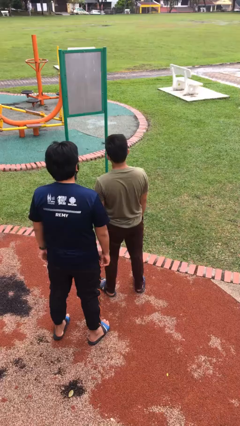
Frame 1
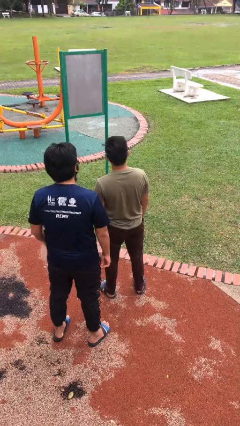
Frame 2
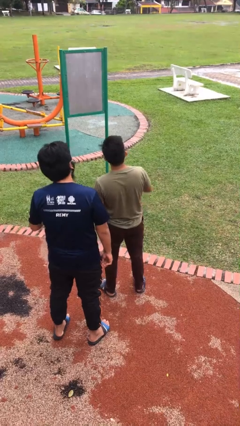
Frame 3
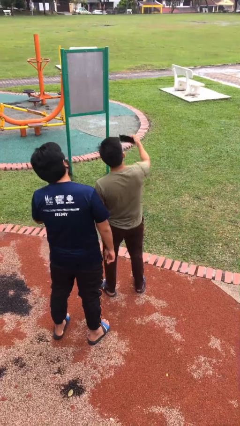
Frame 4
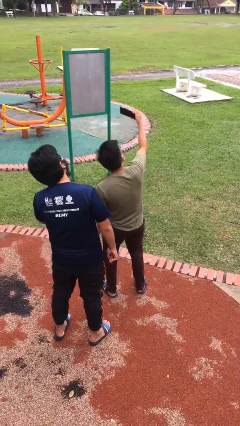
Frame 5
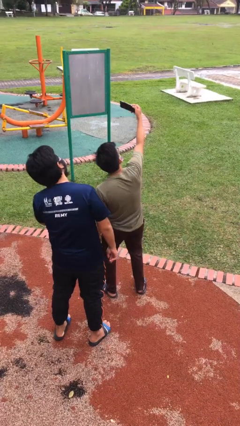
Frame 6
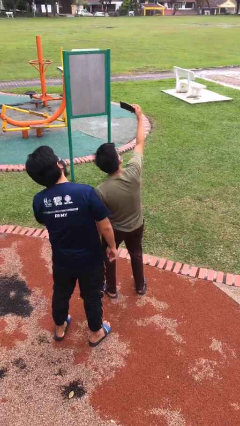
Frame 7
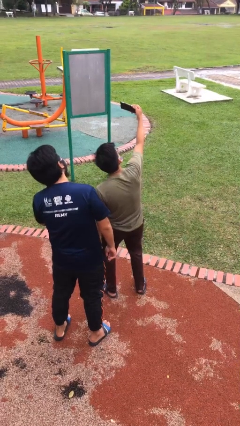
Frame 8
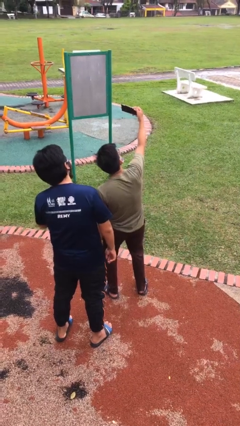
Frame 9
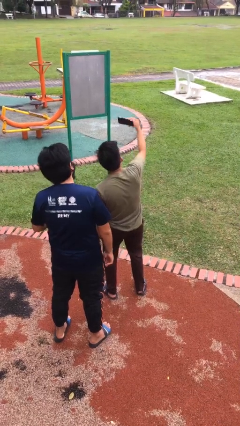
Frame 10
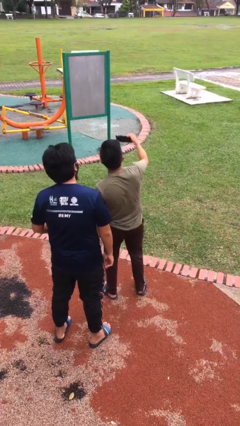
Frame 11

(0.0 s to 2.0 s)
person takes selfie with person

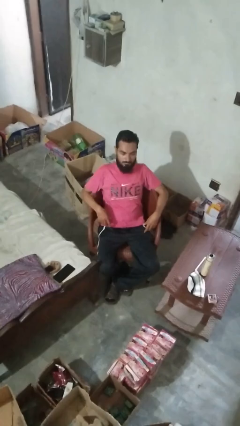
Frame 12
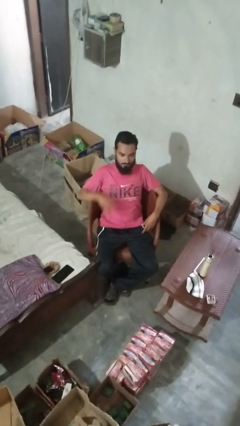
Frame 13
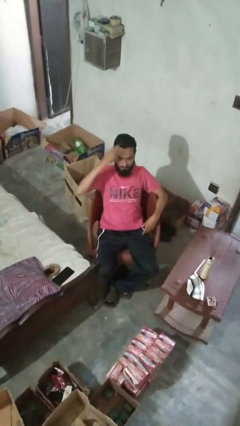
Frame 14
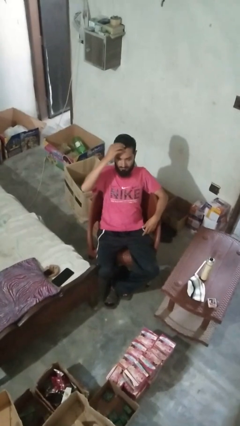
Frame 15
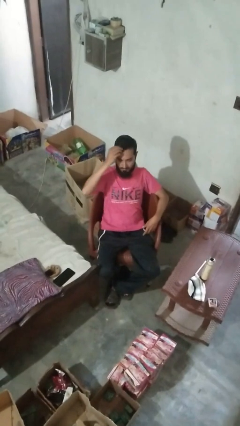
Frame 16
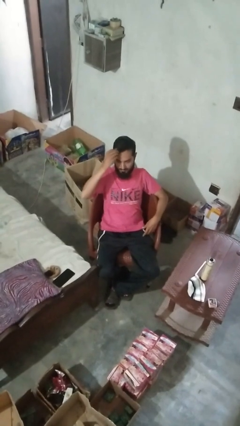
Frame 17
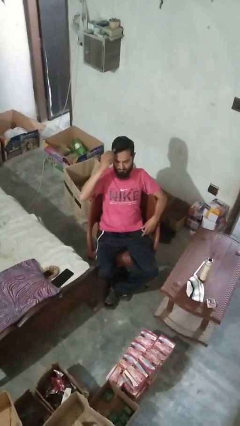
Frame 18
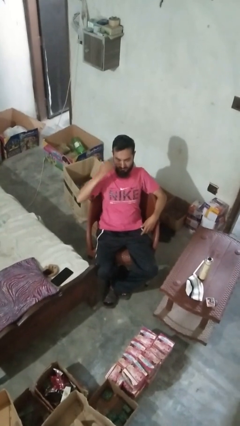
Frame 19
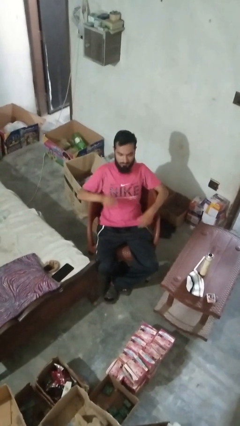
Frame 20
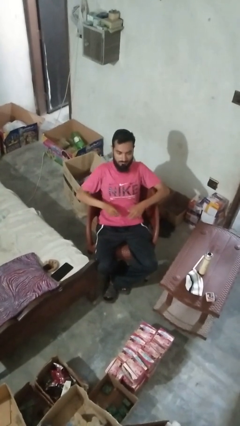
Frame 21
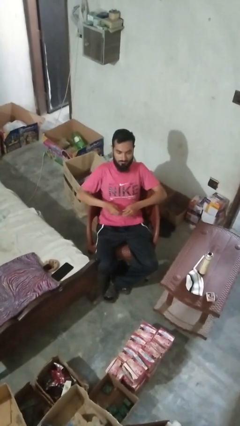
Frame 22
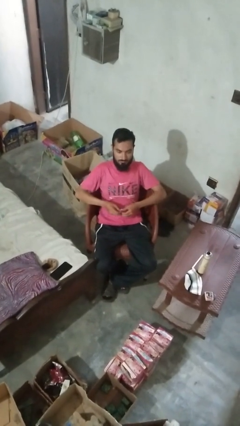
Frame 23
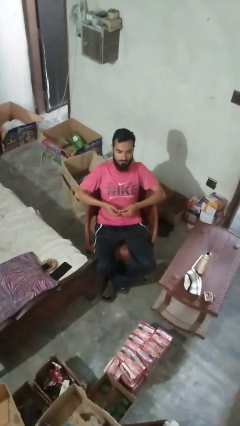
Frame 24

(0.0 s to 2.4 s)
person takes off hairtie

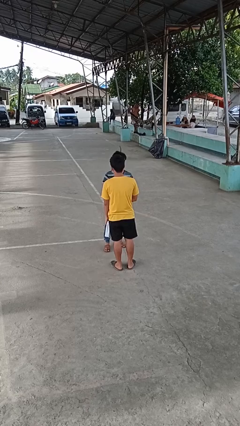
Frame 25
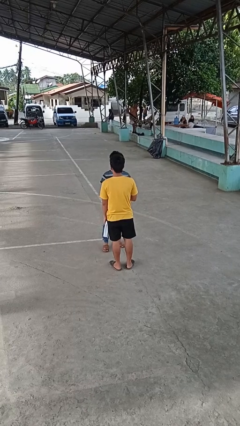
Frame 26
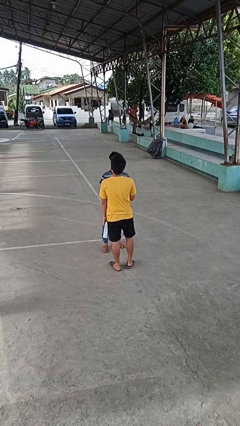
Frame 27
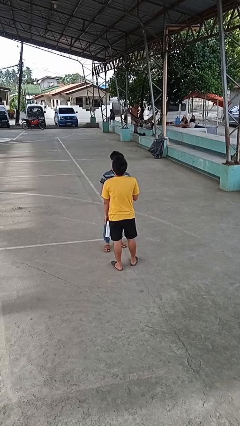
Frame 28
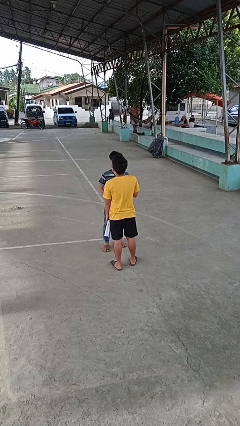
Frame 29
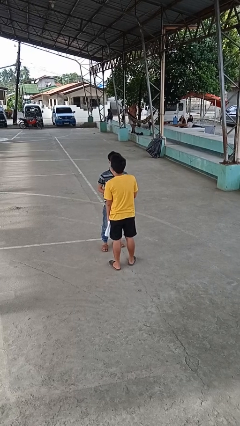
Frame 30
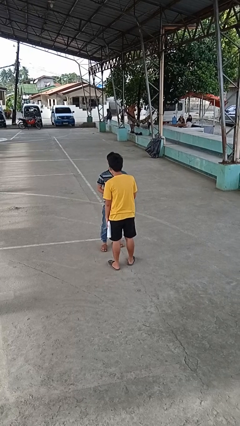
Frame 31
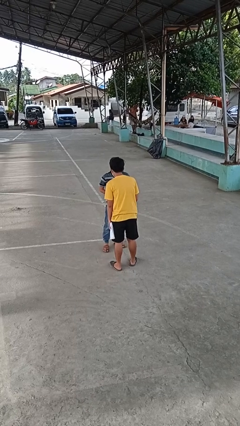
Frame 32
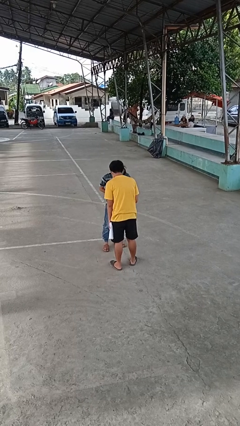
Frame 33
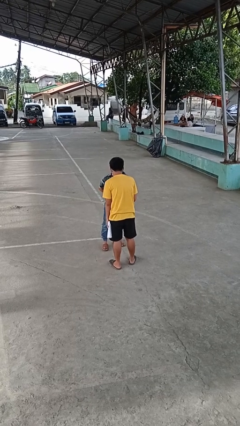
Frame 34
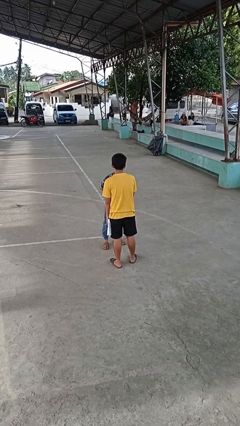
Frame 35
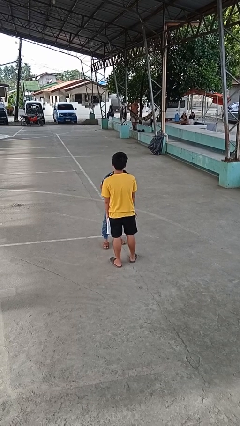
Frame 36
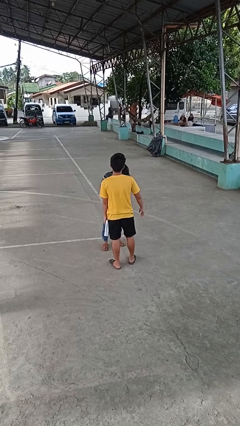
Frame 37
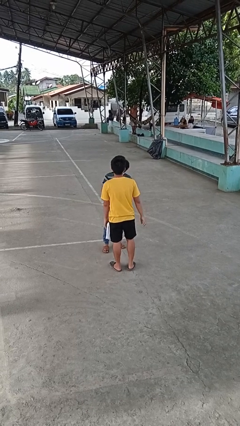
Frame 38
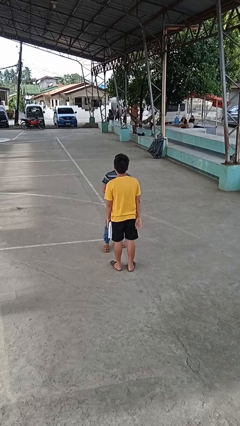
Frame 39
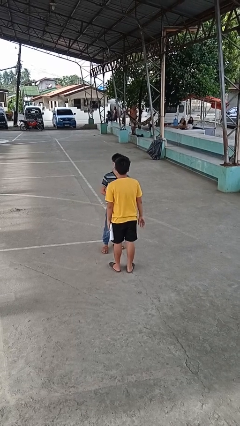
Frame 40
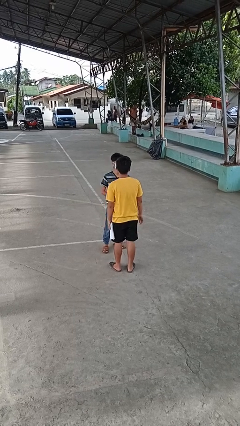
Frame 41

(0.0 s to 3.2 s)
person laughs with person

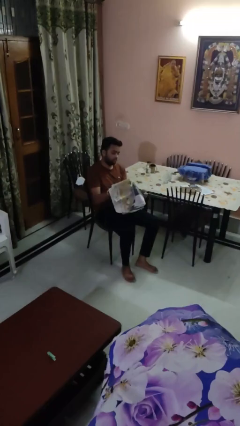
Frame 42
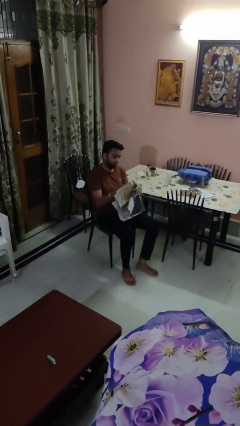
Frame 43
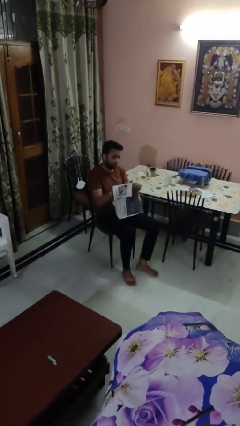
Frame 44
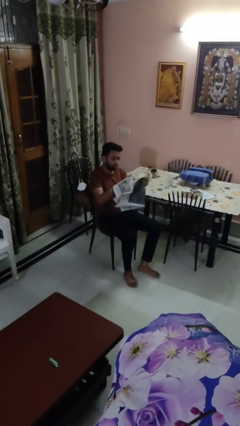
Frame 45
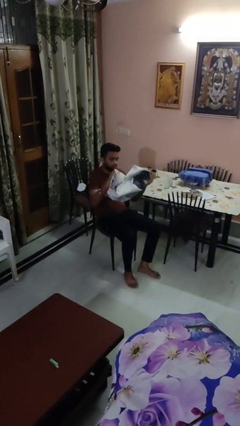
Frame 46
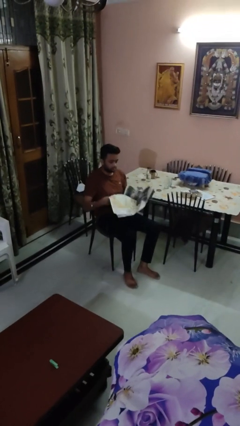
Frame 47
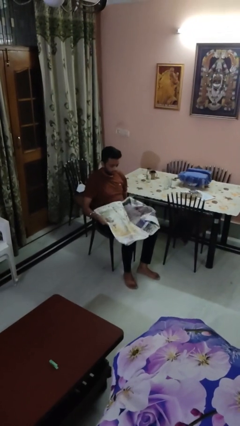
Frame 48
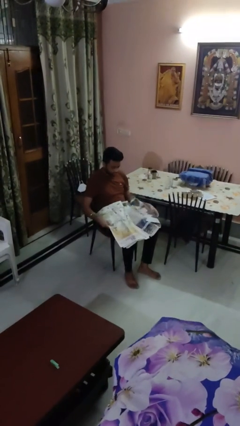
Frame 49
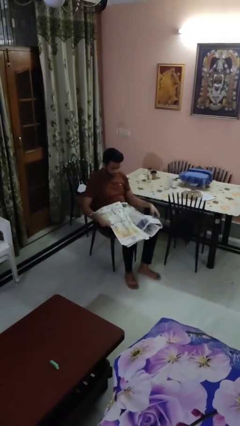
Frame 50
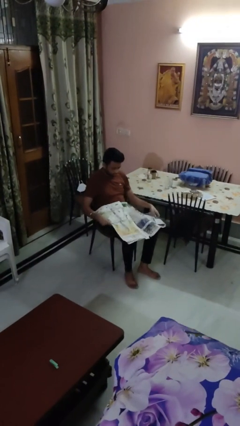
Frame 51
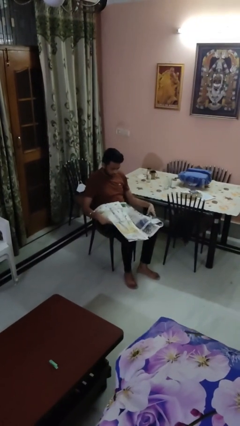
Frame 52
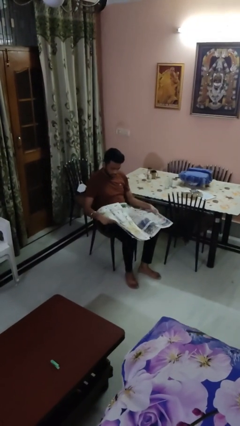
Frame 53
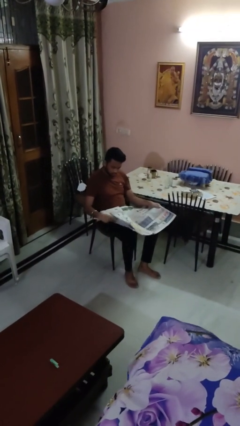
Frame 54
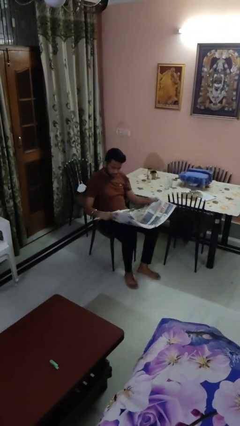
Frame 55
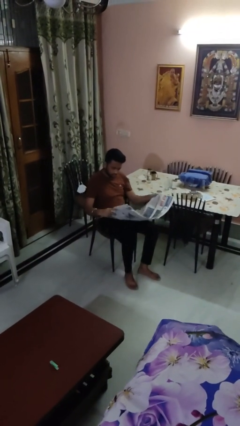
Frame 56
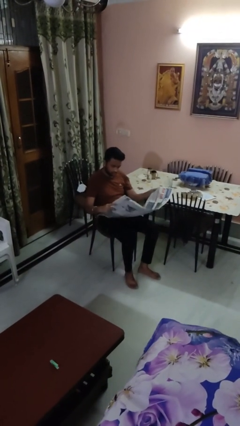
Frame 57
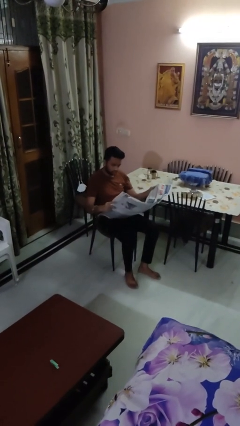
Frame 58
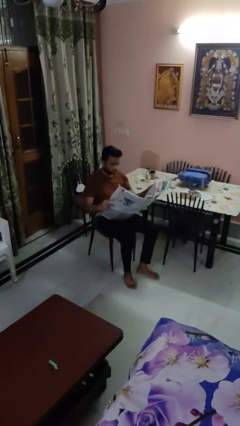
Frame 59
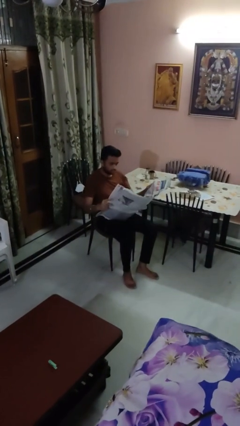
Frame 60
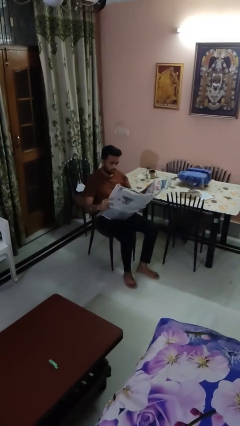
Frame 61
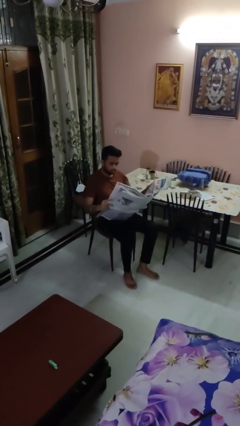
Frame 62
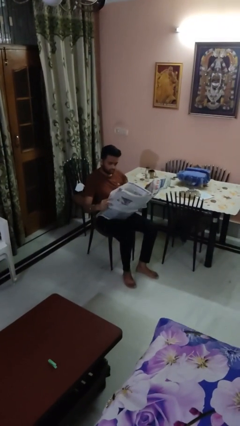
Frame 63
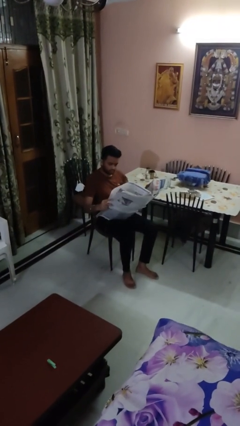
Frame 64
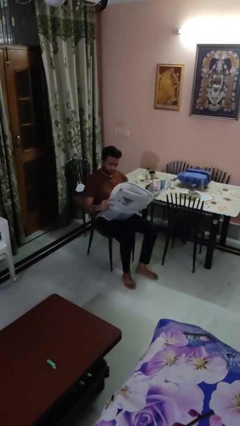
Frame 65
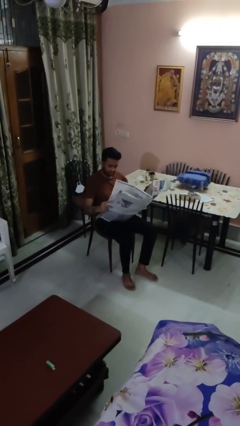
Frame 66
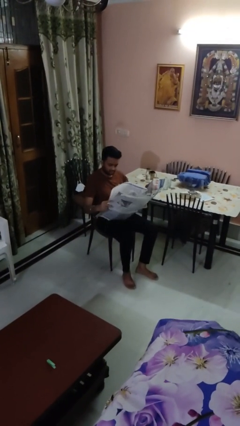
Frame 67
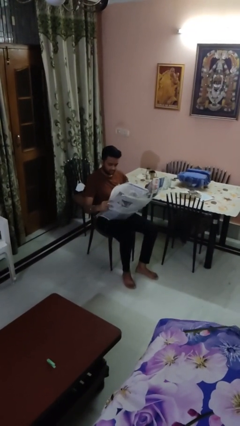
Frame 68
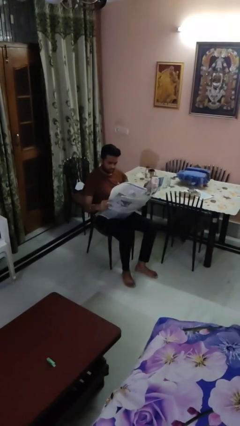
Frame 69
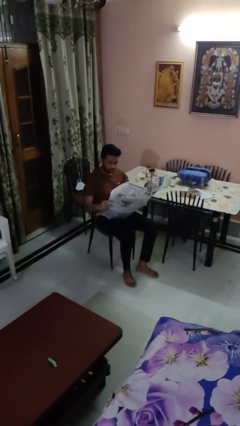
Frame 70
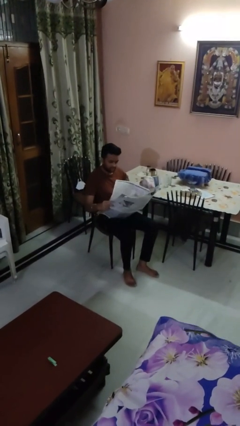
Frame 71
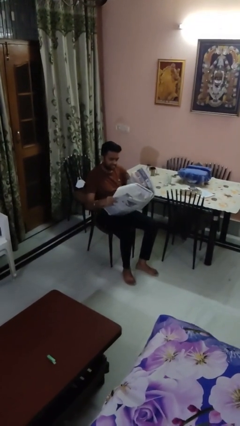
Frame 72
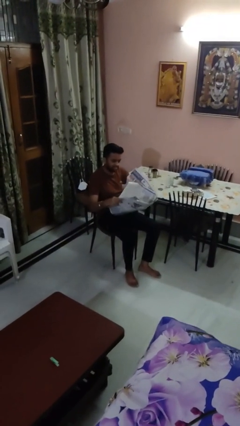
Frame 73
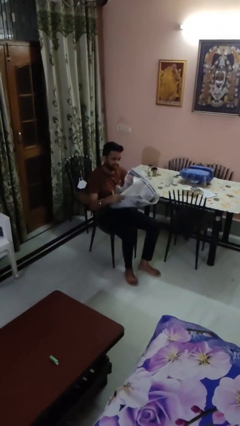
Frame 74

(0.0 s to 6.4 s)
person reads newspaper

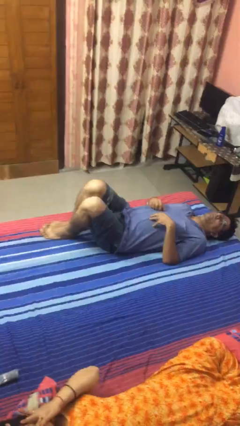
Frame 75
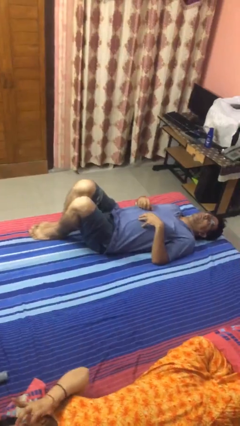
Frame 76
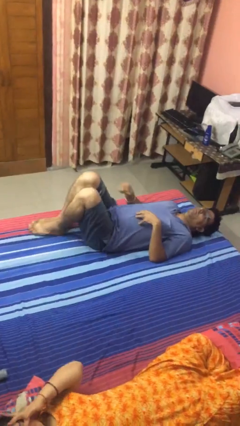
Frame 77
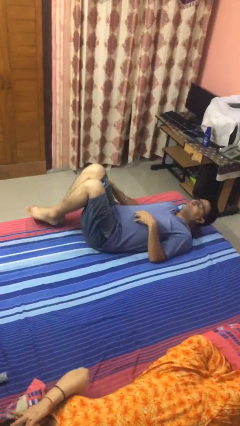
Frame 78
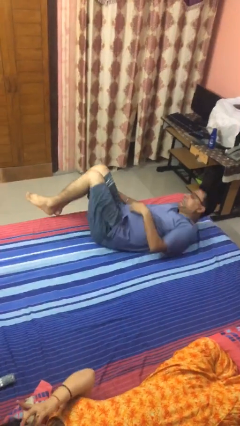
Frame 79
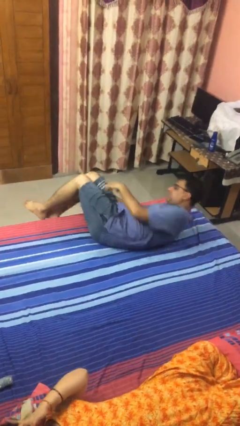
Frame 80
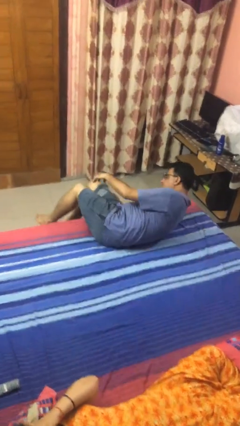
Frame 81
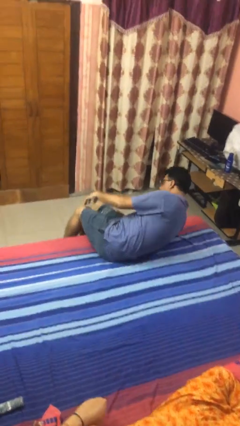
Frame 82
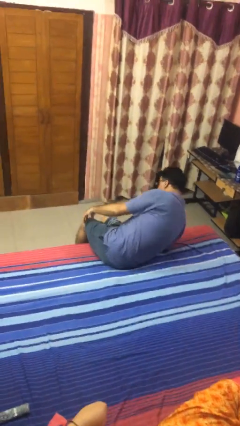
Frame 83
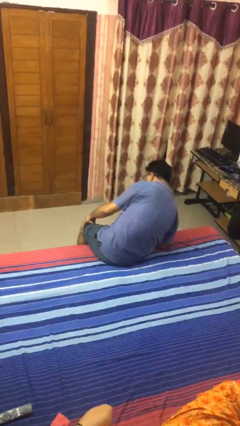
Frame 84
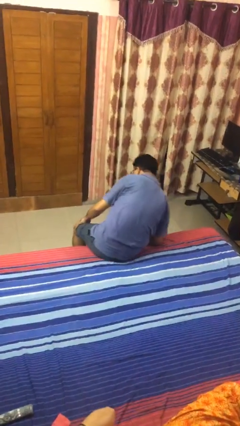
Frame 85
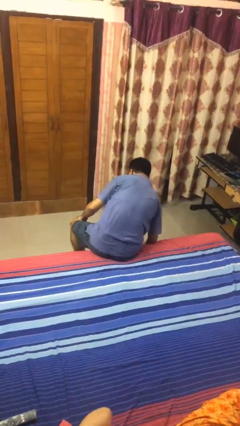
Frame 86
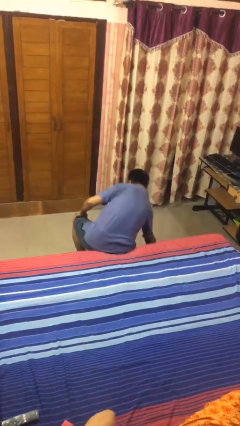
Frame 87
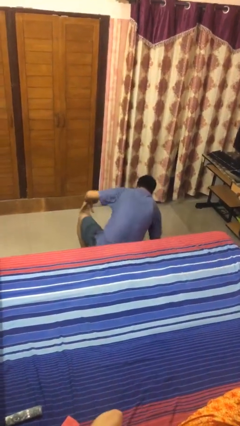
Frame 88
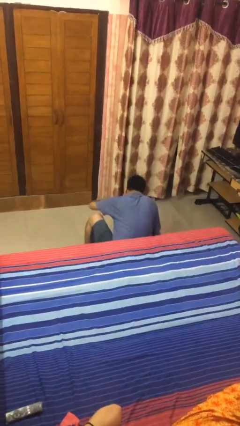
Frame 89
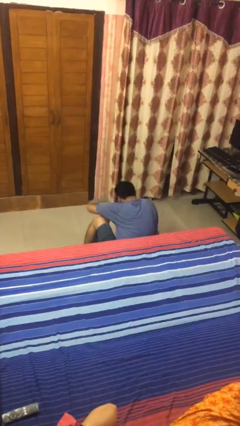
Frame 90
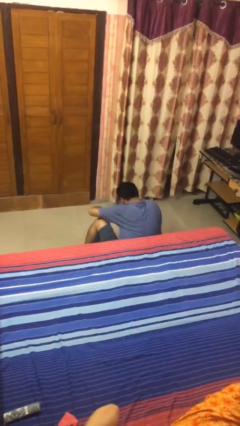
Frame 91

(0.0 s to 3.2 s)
person falls from bed

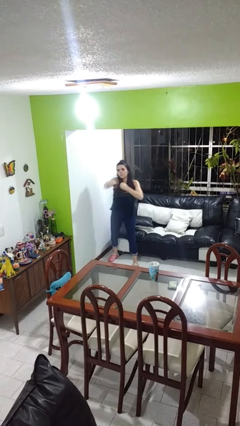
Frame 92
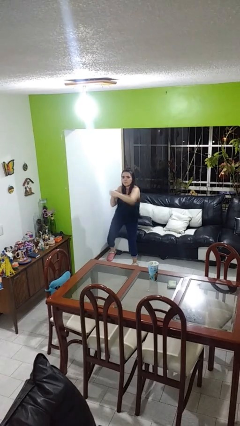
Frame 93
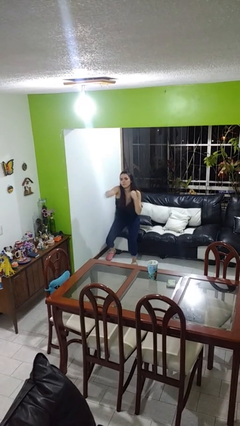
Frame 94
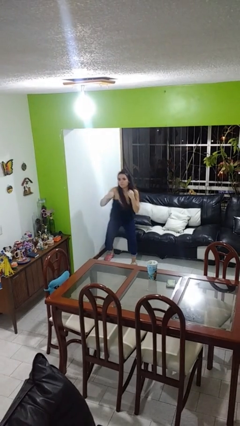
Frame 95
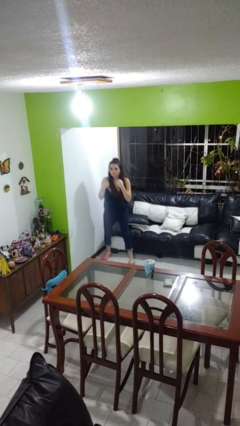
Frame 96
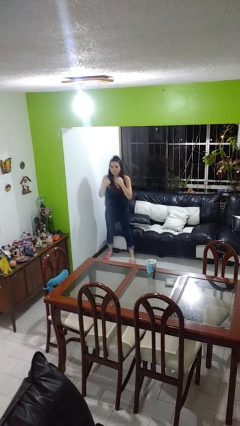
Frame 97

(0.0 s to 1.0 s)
person punches
